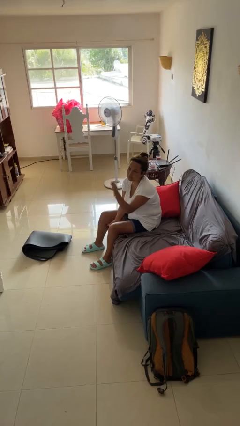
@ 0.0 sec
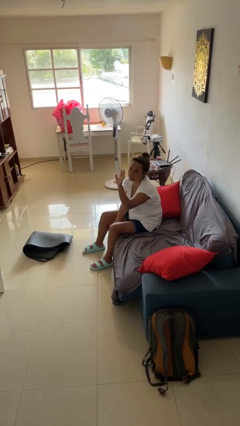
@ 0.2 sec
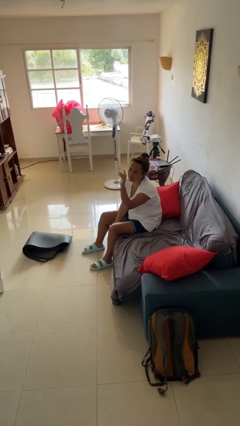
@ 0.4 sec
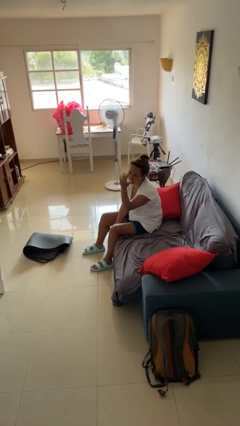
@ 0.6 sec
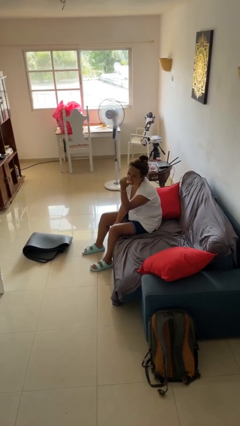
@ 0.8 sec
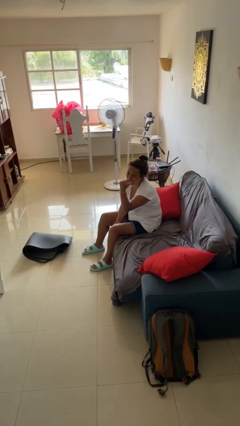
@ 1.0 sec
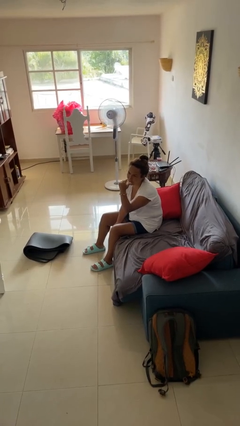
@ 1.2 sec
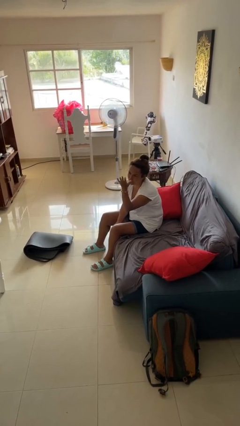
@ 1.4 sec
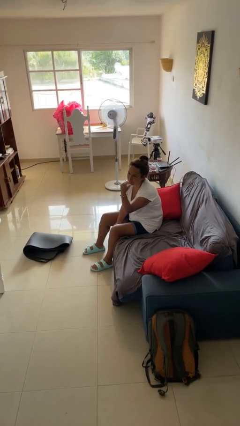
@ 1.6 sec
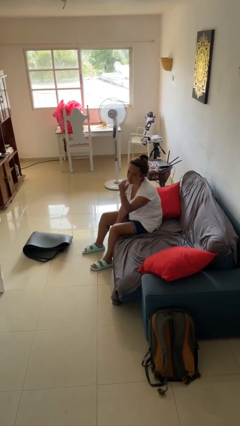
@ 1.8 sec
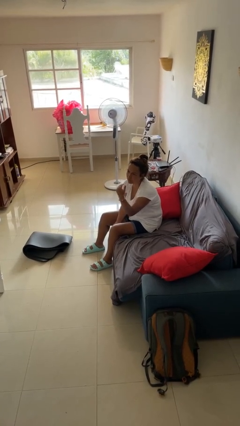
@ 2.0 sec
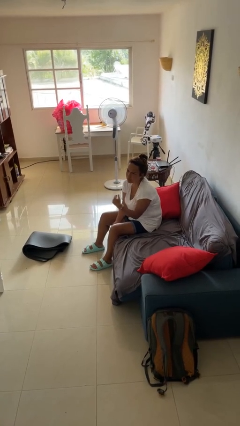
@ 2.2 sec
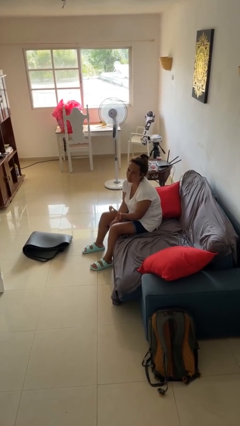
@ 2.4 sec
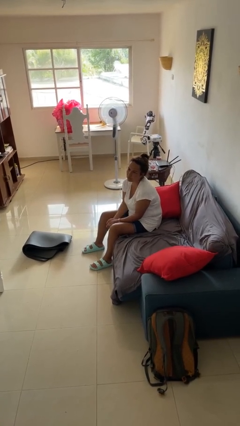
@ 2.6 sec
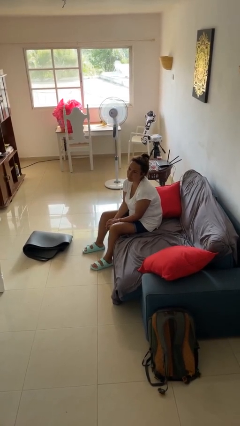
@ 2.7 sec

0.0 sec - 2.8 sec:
person gestures come here

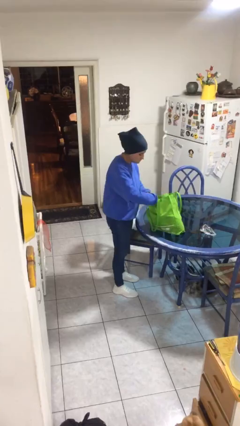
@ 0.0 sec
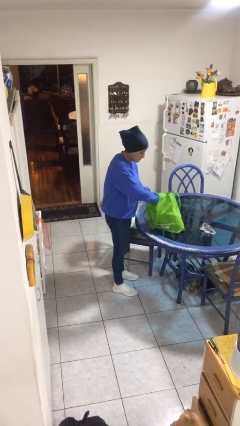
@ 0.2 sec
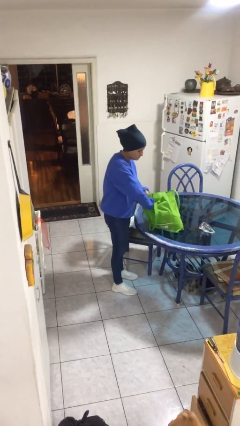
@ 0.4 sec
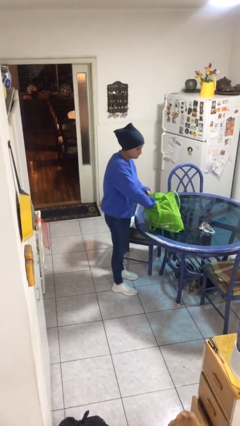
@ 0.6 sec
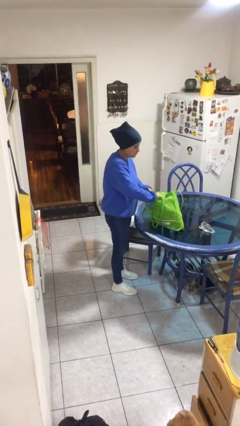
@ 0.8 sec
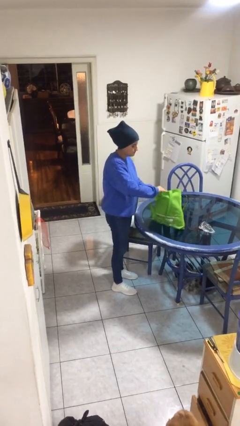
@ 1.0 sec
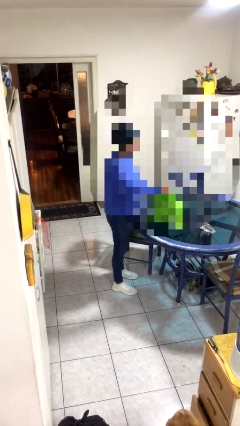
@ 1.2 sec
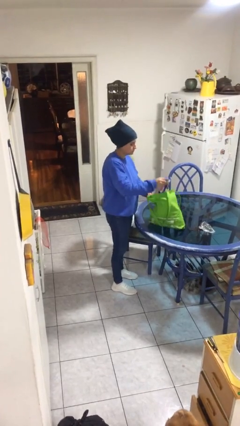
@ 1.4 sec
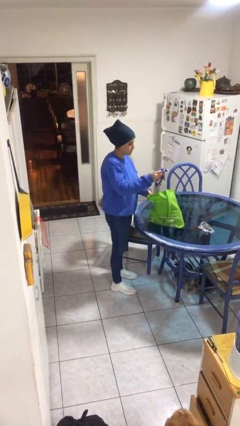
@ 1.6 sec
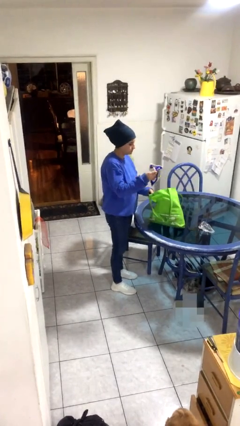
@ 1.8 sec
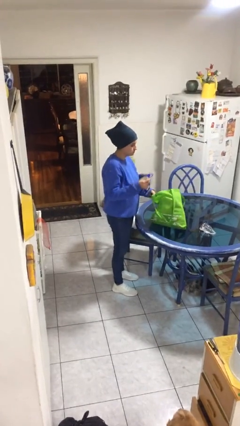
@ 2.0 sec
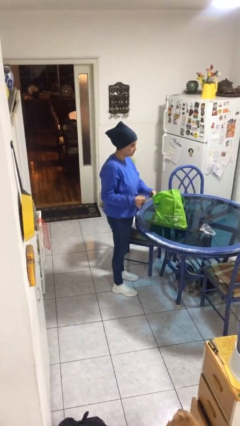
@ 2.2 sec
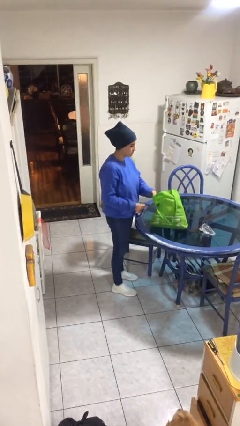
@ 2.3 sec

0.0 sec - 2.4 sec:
person takes object from bag

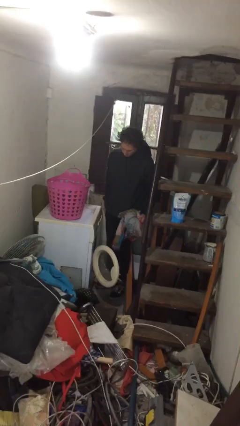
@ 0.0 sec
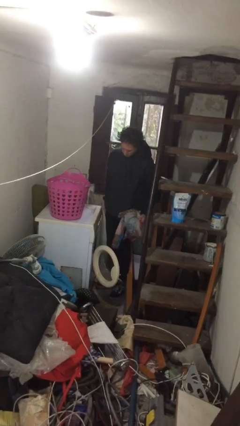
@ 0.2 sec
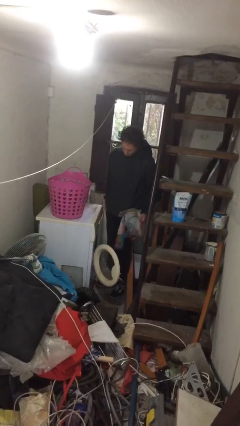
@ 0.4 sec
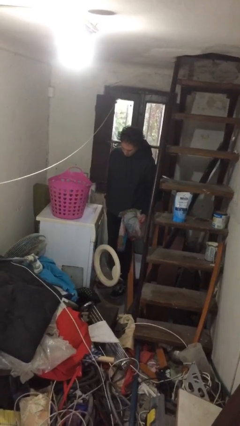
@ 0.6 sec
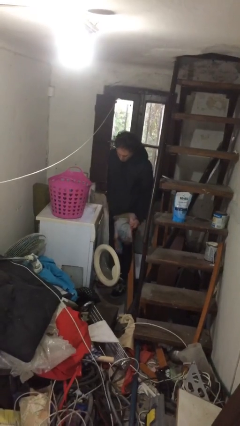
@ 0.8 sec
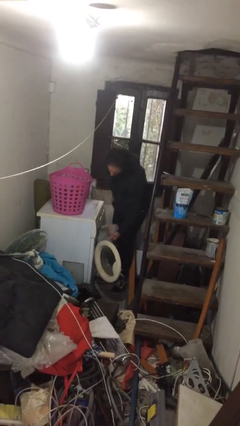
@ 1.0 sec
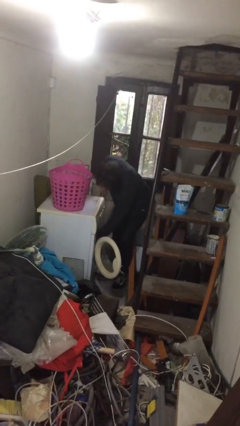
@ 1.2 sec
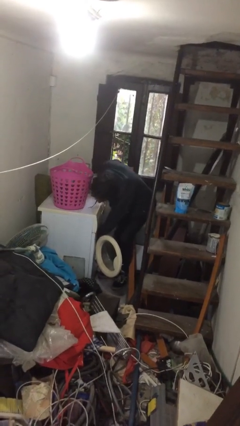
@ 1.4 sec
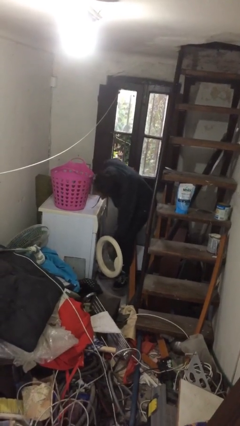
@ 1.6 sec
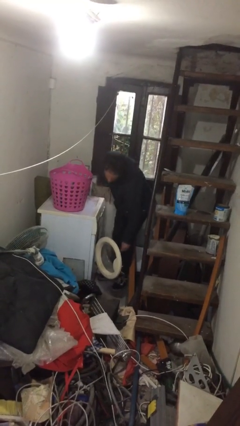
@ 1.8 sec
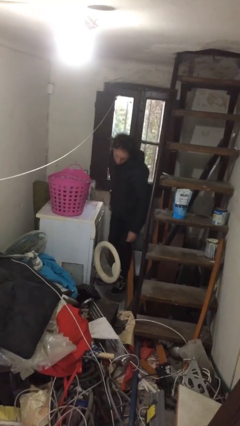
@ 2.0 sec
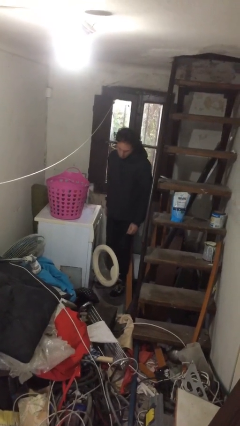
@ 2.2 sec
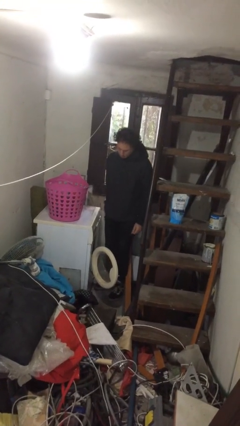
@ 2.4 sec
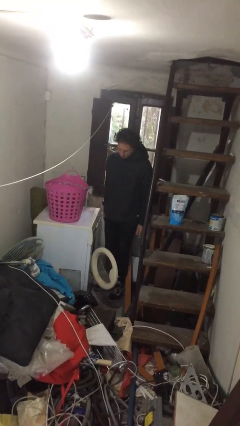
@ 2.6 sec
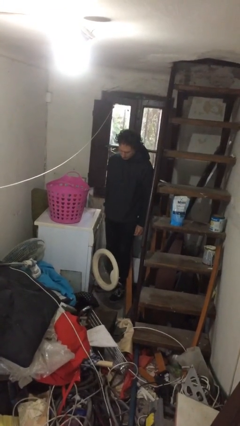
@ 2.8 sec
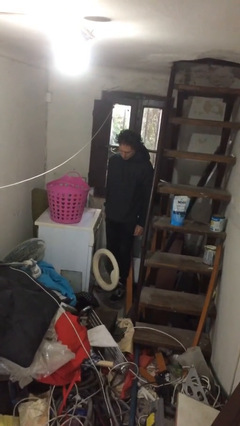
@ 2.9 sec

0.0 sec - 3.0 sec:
person loads clotheswasher

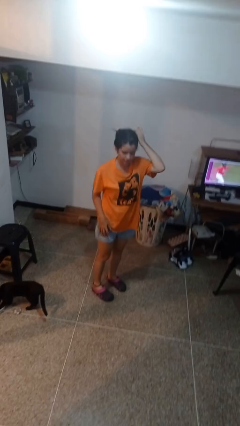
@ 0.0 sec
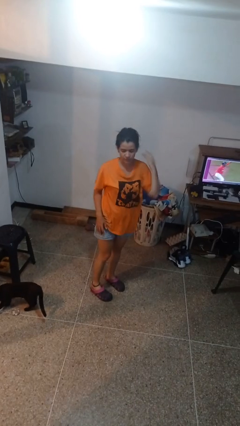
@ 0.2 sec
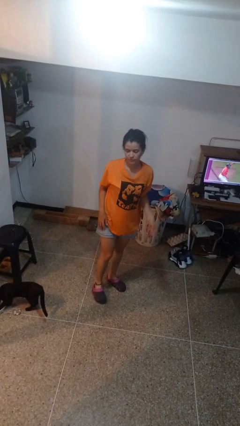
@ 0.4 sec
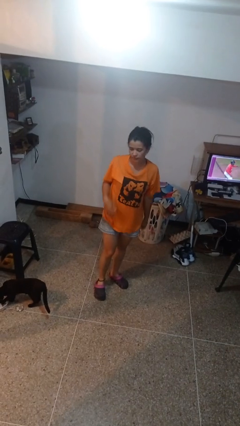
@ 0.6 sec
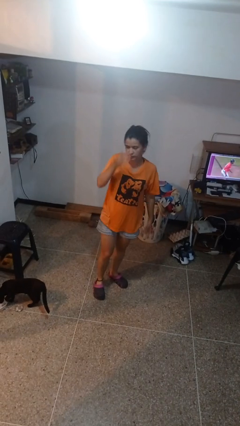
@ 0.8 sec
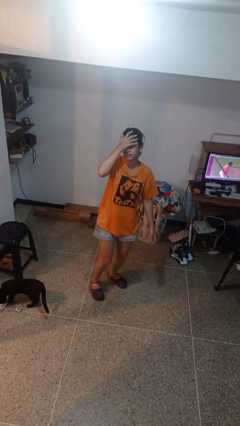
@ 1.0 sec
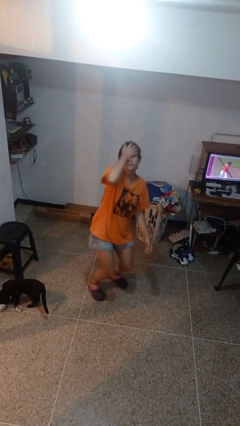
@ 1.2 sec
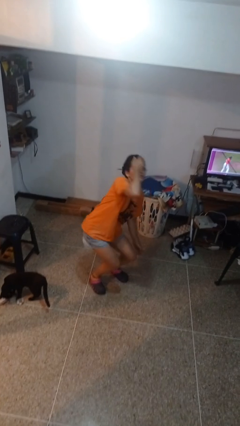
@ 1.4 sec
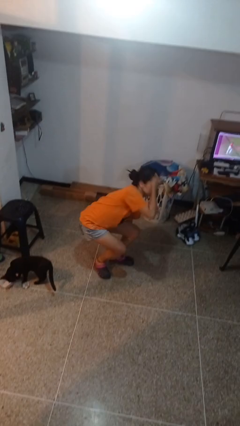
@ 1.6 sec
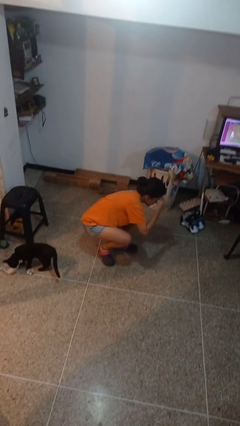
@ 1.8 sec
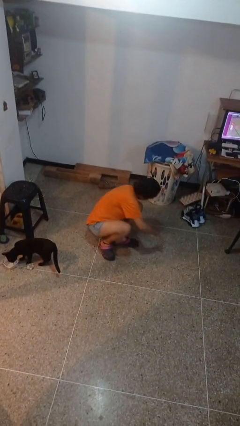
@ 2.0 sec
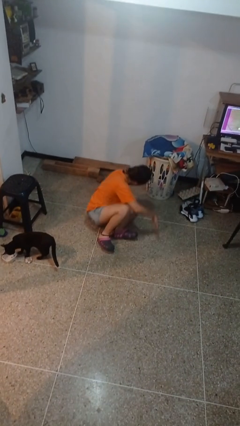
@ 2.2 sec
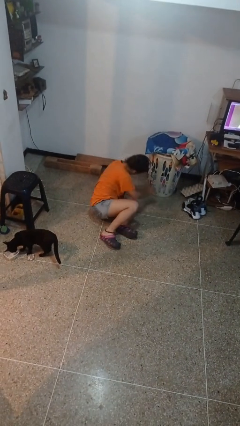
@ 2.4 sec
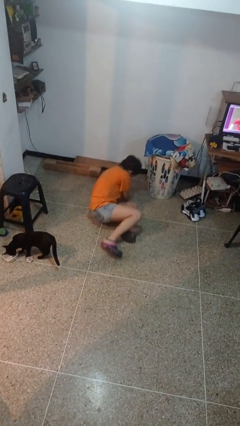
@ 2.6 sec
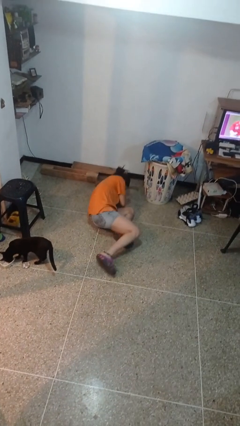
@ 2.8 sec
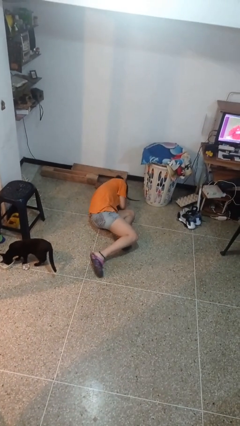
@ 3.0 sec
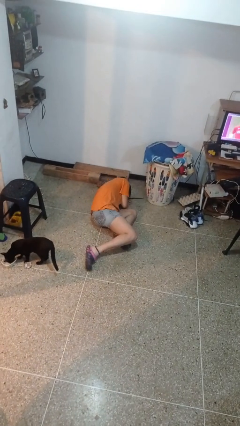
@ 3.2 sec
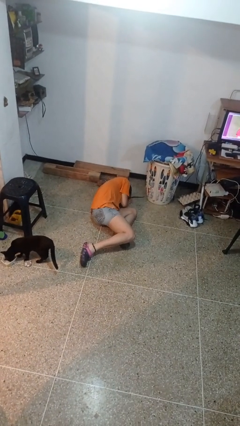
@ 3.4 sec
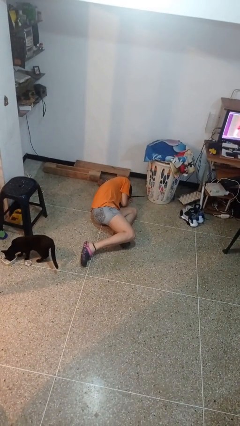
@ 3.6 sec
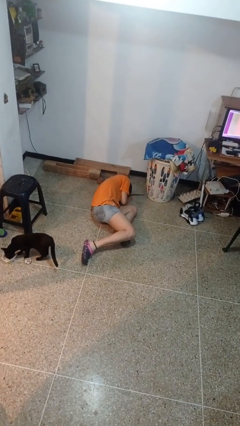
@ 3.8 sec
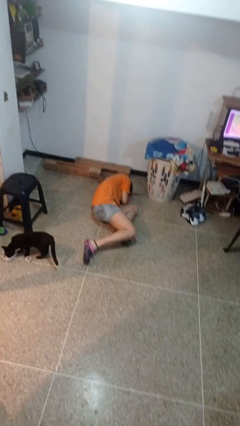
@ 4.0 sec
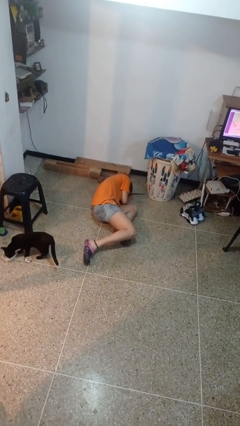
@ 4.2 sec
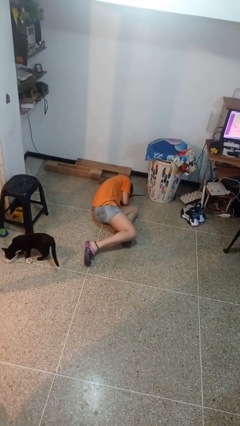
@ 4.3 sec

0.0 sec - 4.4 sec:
person falls while standing

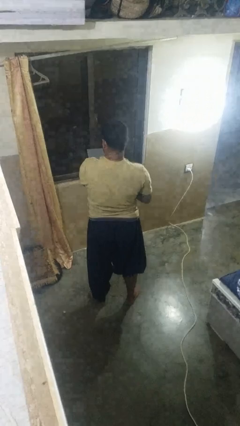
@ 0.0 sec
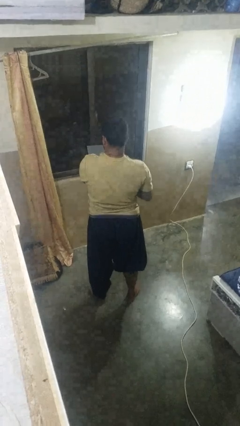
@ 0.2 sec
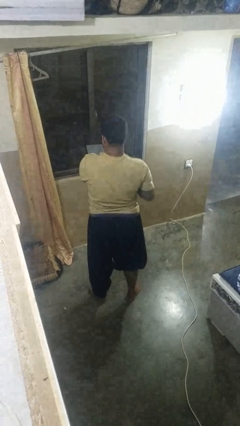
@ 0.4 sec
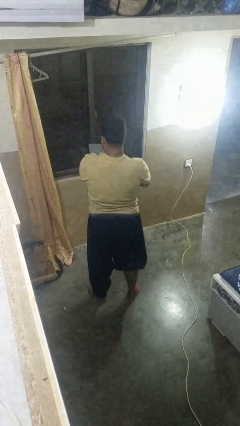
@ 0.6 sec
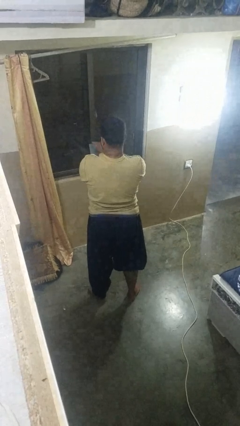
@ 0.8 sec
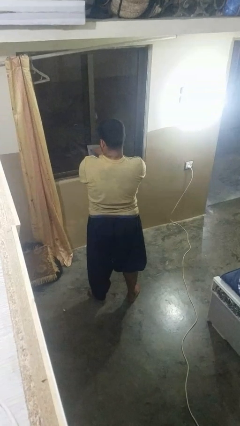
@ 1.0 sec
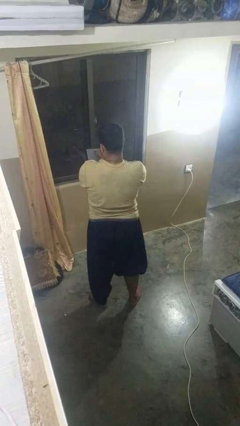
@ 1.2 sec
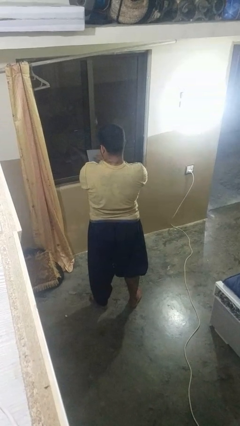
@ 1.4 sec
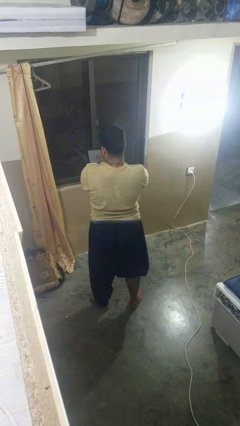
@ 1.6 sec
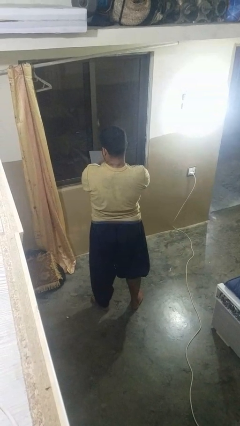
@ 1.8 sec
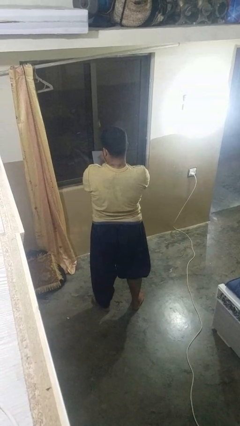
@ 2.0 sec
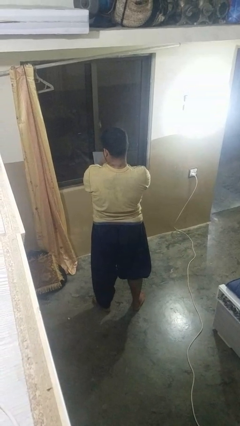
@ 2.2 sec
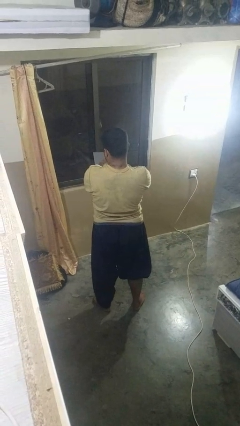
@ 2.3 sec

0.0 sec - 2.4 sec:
person interacts with tablet

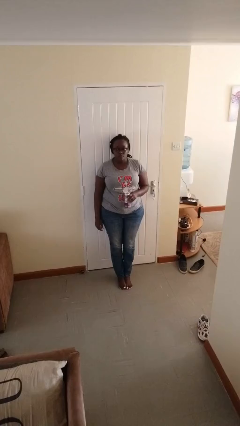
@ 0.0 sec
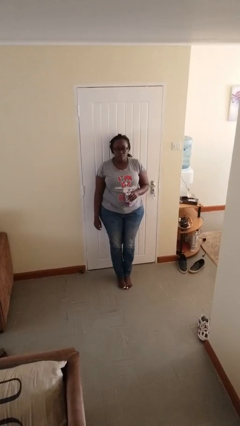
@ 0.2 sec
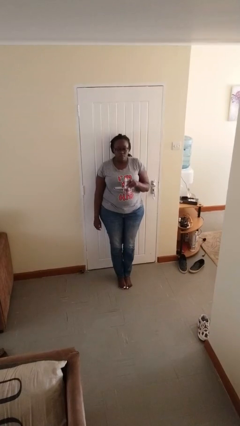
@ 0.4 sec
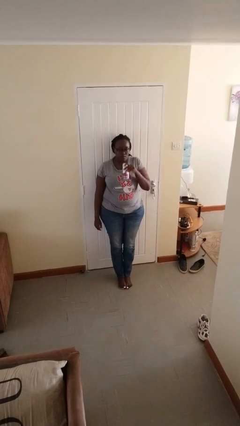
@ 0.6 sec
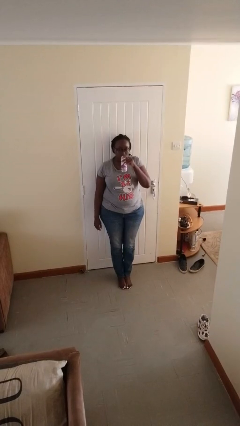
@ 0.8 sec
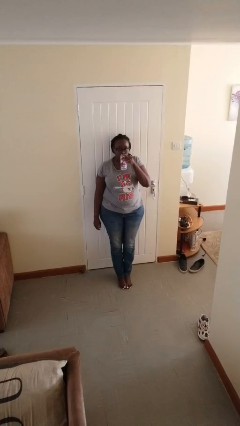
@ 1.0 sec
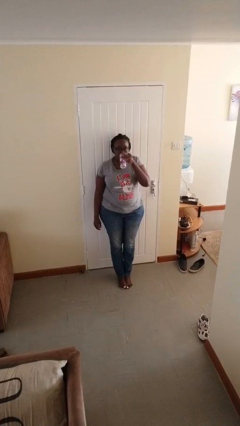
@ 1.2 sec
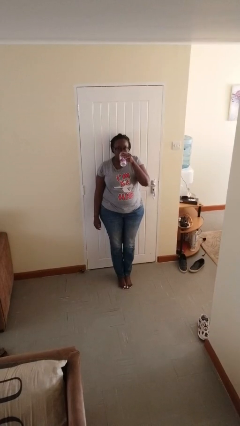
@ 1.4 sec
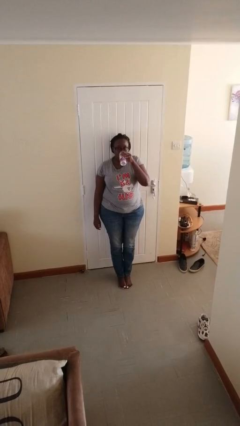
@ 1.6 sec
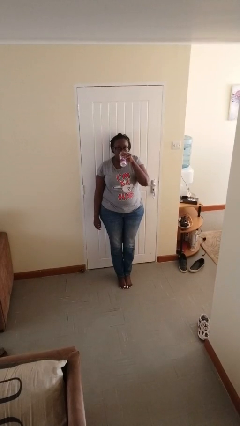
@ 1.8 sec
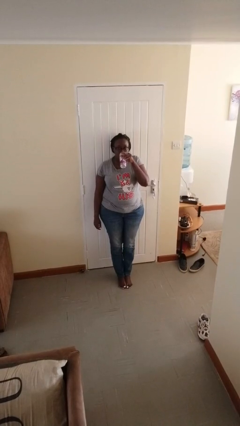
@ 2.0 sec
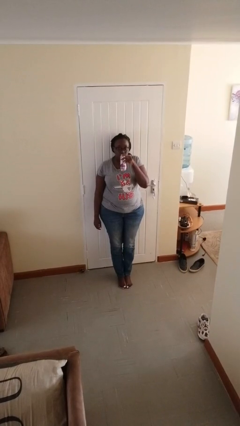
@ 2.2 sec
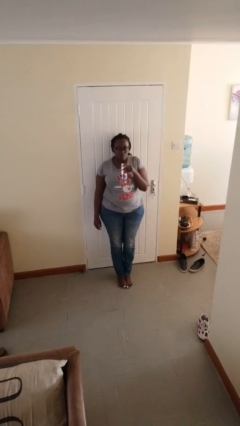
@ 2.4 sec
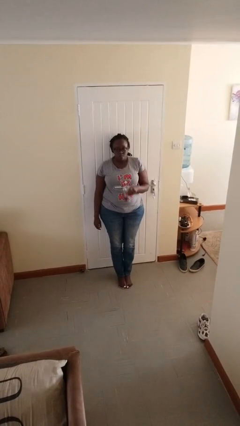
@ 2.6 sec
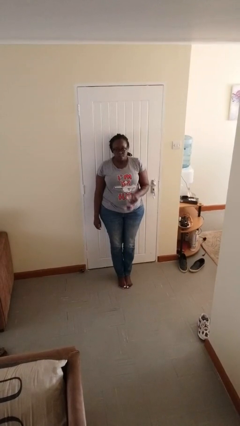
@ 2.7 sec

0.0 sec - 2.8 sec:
person drinks from beverage can
